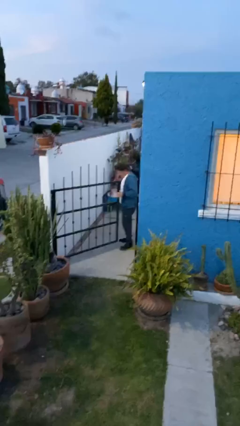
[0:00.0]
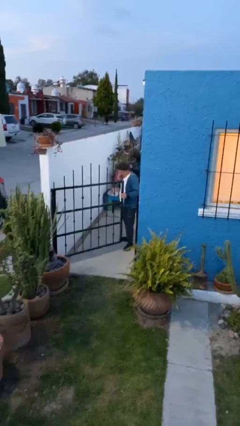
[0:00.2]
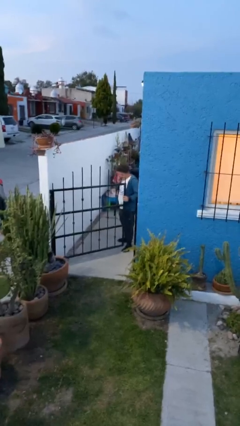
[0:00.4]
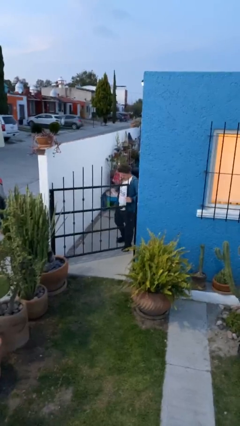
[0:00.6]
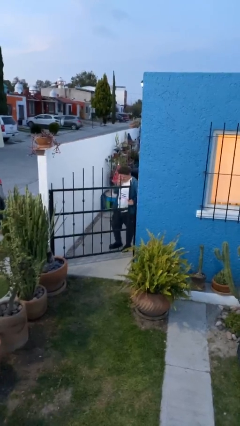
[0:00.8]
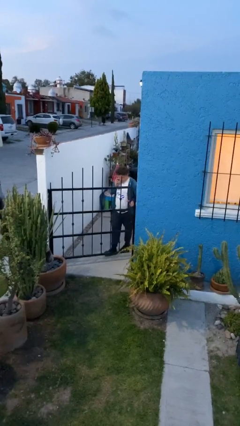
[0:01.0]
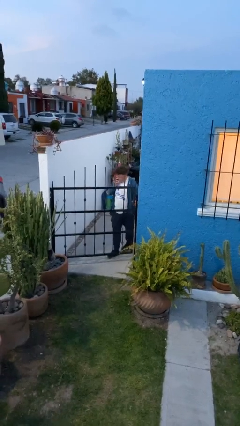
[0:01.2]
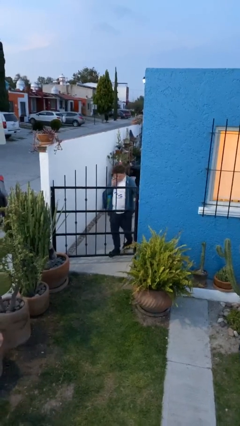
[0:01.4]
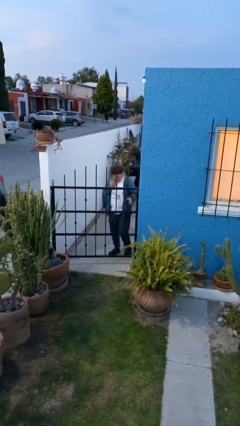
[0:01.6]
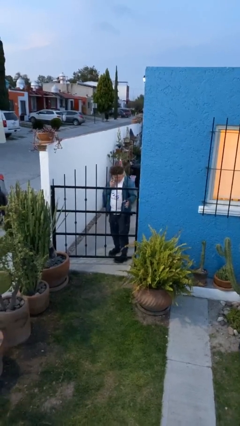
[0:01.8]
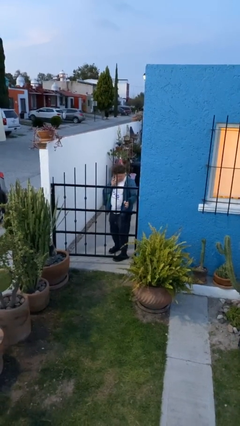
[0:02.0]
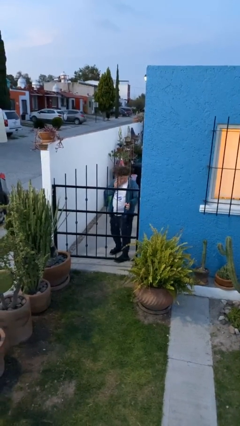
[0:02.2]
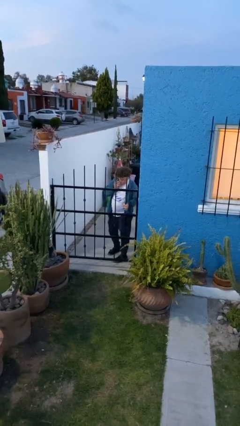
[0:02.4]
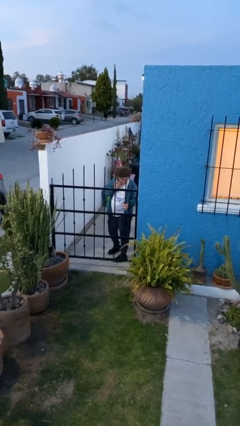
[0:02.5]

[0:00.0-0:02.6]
person closes facility door

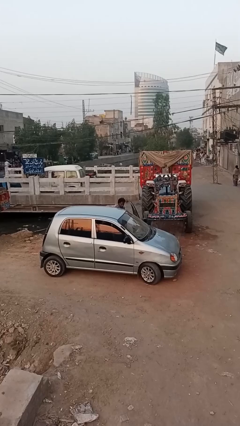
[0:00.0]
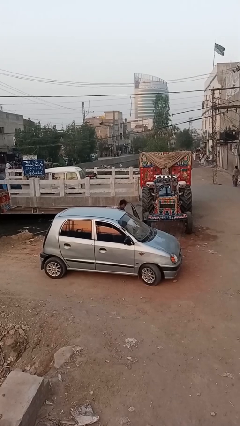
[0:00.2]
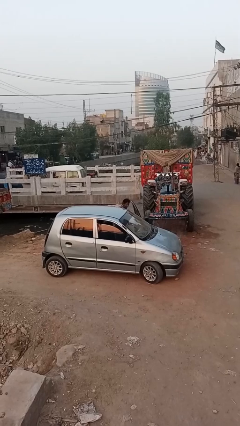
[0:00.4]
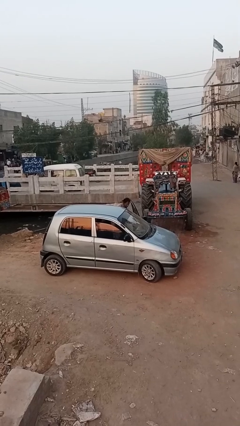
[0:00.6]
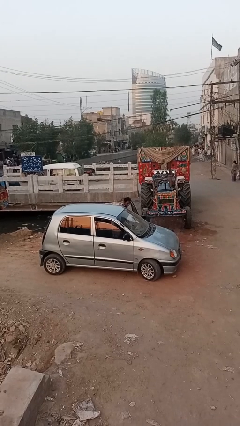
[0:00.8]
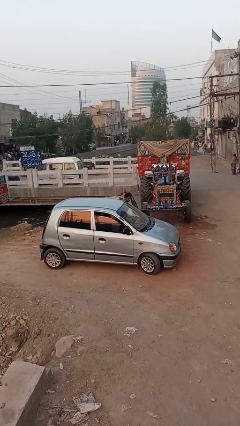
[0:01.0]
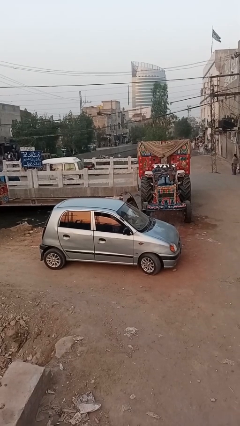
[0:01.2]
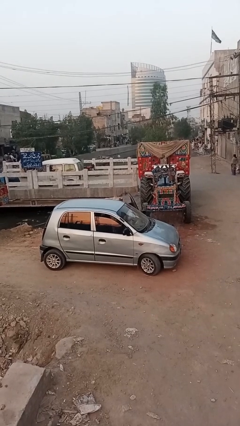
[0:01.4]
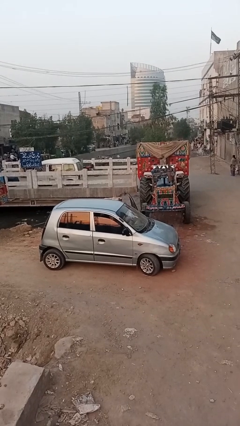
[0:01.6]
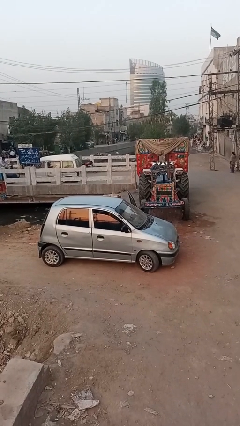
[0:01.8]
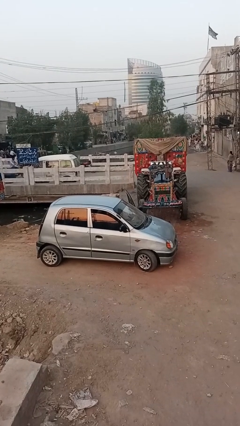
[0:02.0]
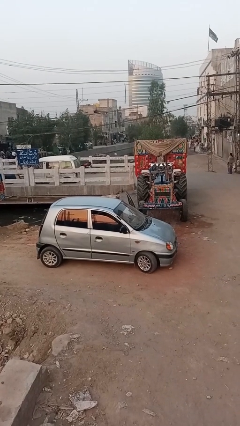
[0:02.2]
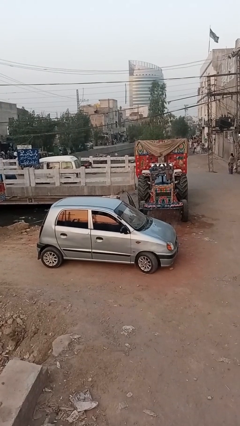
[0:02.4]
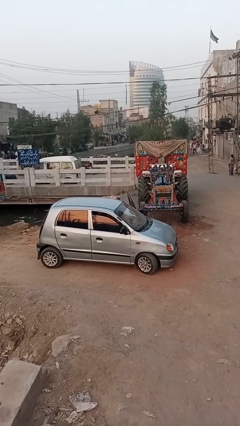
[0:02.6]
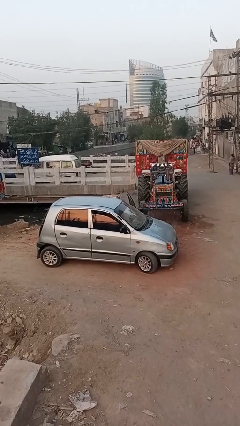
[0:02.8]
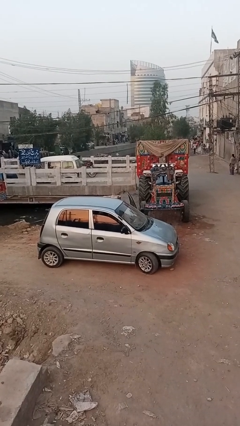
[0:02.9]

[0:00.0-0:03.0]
person enters car

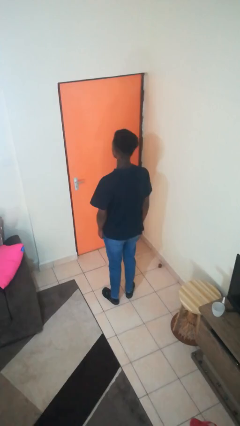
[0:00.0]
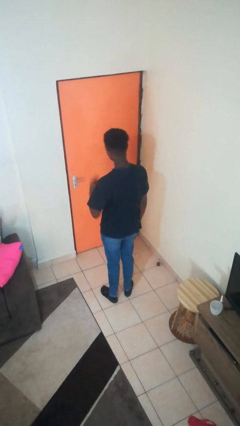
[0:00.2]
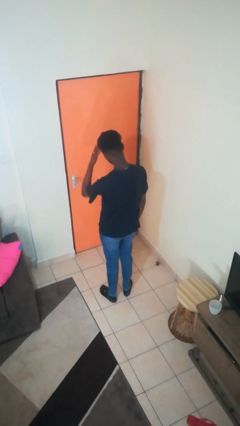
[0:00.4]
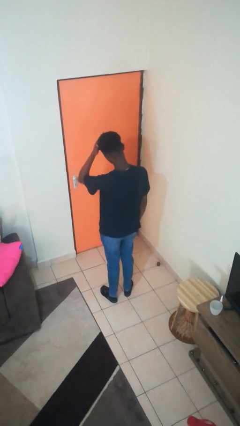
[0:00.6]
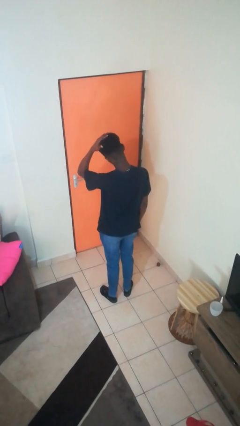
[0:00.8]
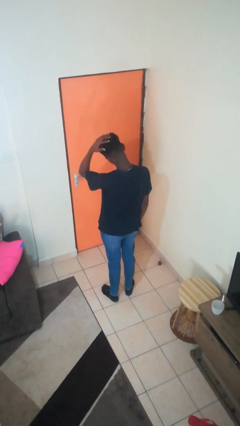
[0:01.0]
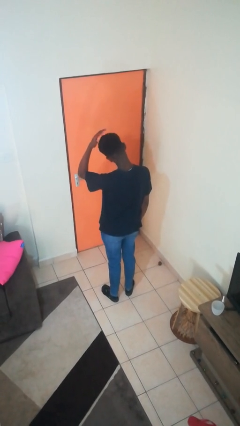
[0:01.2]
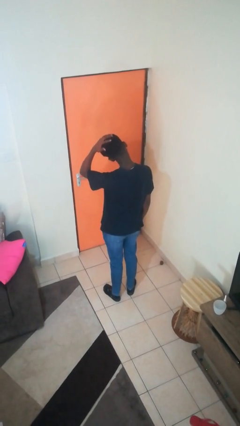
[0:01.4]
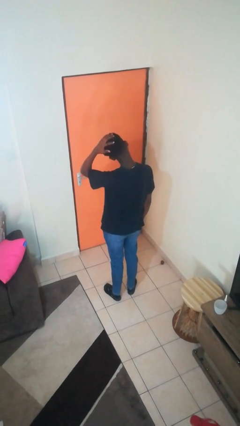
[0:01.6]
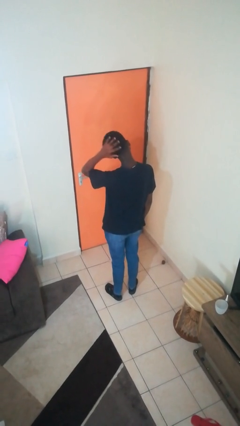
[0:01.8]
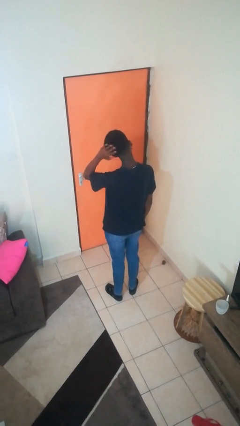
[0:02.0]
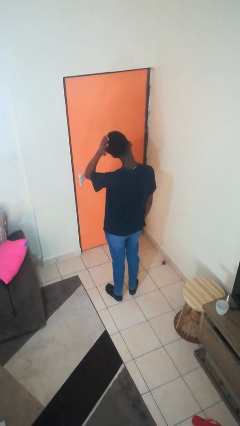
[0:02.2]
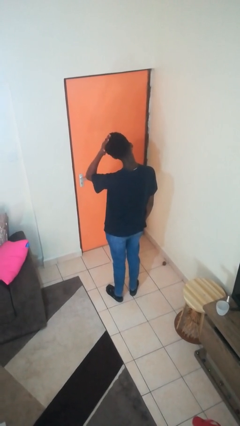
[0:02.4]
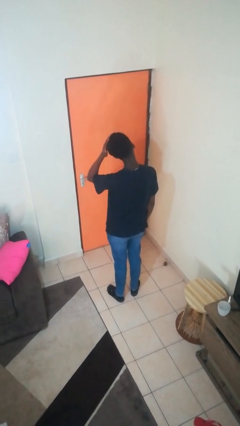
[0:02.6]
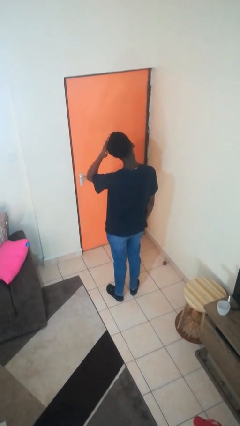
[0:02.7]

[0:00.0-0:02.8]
person strokes hair

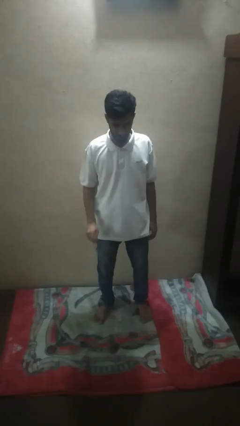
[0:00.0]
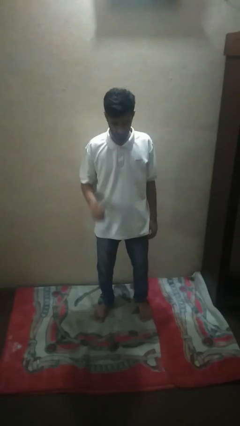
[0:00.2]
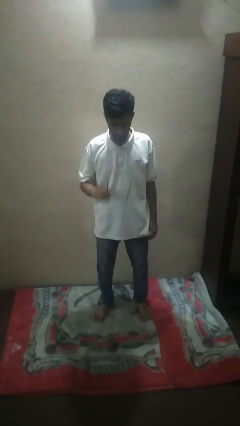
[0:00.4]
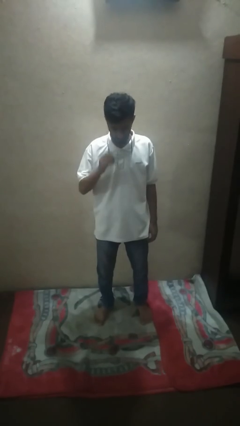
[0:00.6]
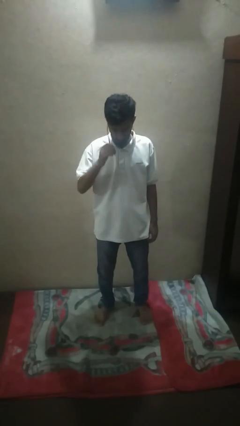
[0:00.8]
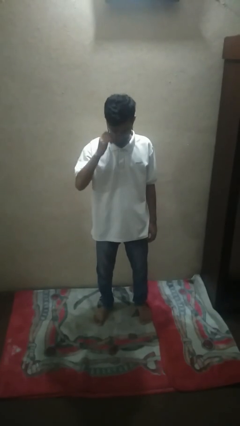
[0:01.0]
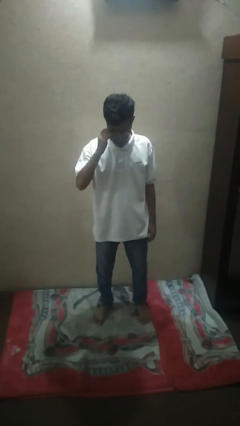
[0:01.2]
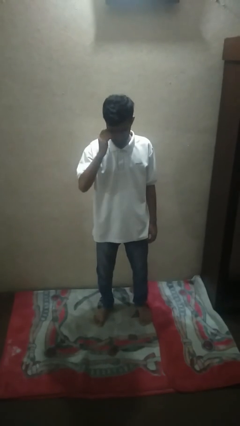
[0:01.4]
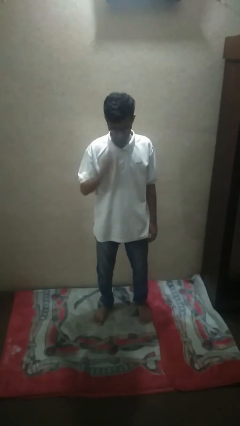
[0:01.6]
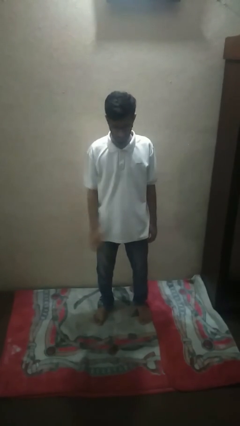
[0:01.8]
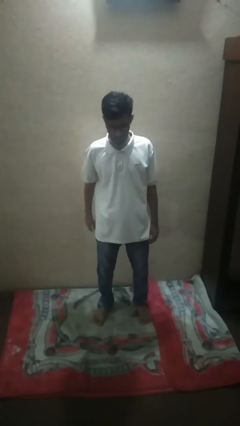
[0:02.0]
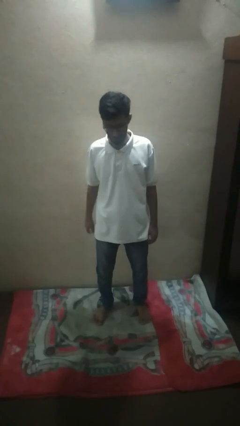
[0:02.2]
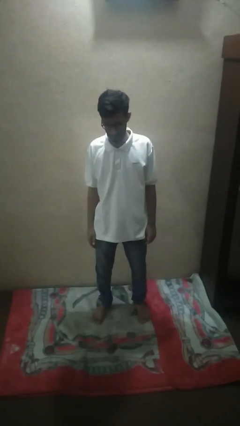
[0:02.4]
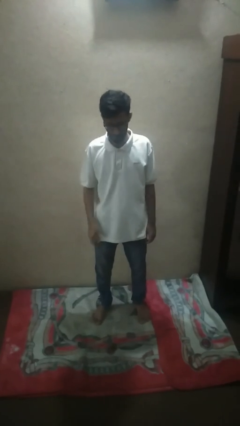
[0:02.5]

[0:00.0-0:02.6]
person puts on glasses

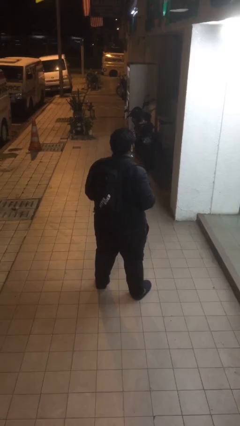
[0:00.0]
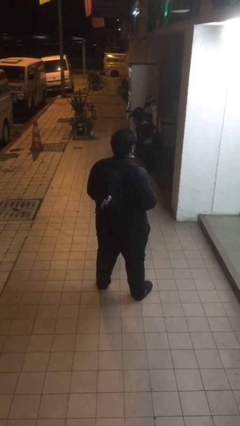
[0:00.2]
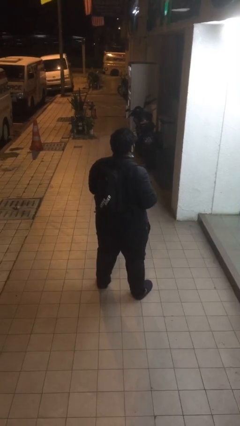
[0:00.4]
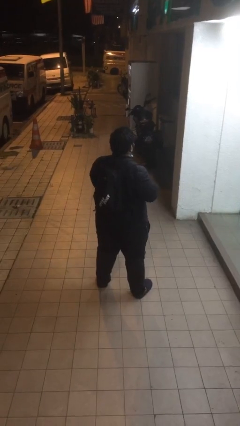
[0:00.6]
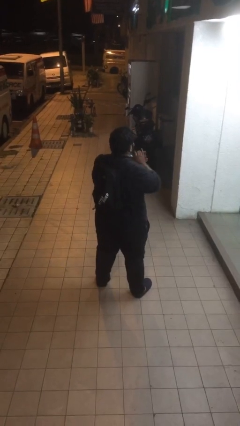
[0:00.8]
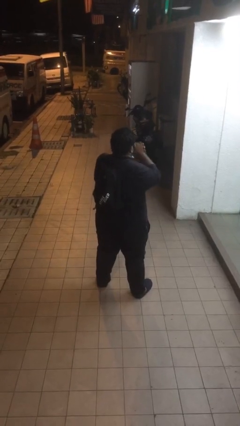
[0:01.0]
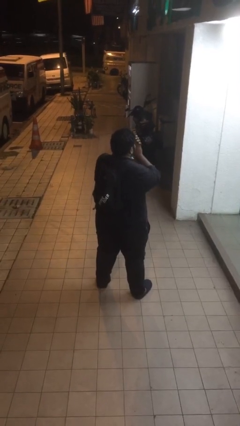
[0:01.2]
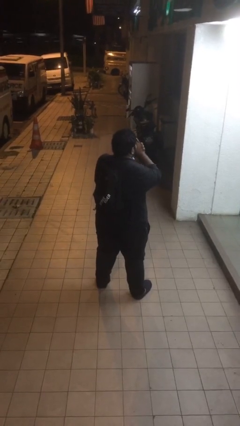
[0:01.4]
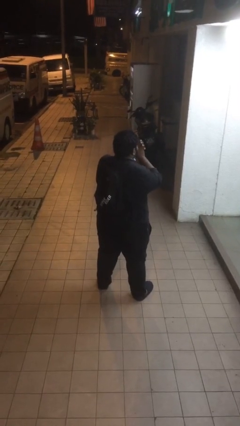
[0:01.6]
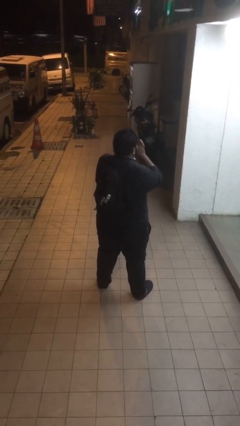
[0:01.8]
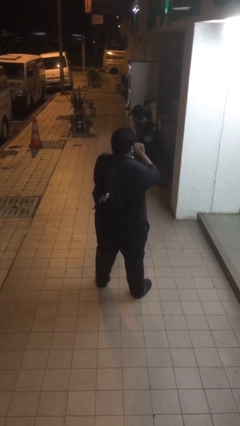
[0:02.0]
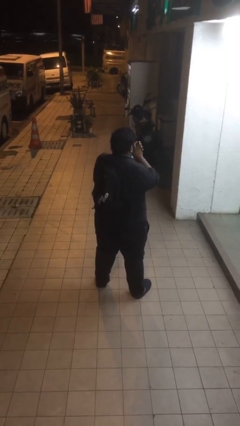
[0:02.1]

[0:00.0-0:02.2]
person blows into hands

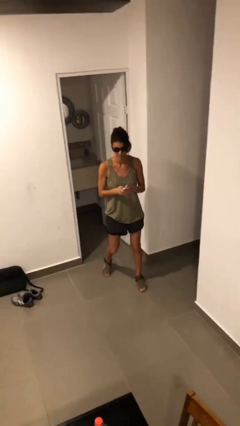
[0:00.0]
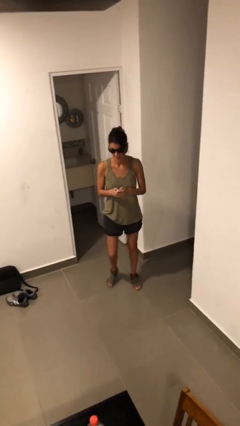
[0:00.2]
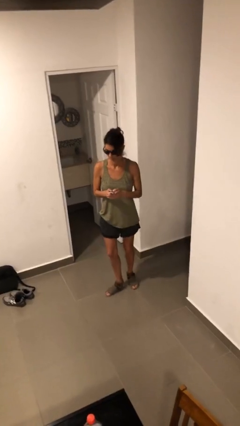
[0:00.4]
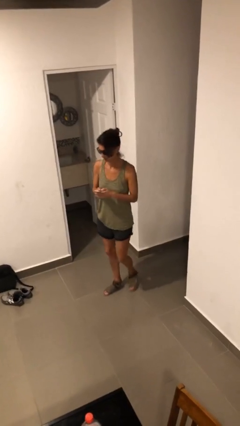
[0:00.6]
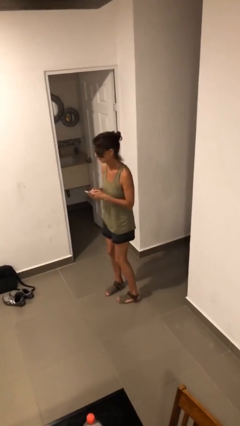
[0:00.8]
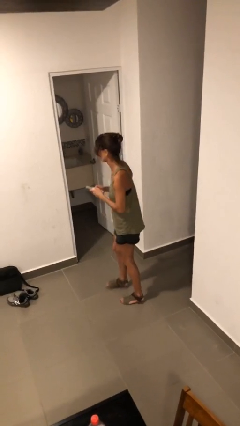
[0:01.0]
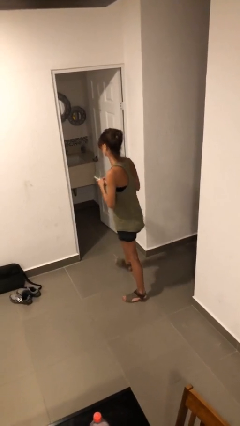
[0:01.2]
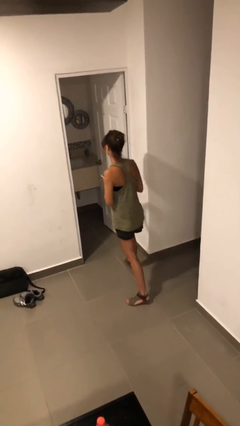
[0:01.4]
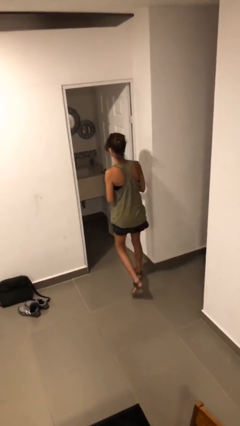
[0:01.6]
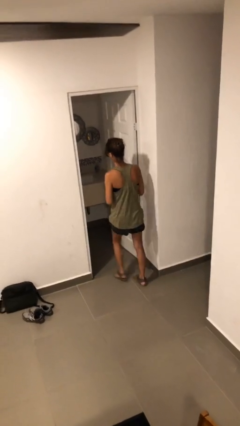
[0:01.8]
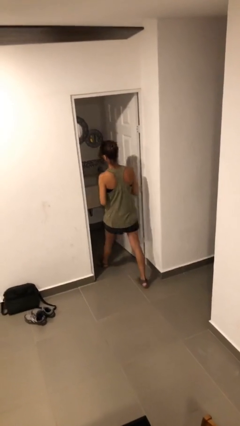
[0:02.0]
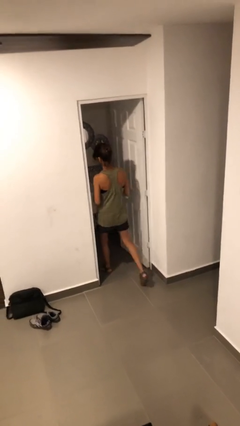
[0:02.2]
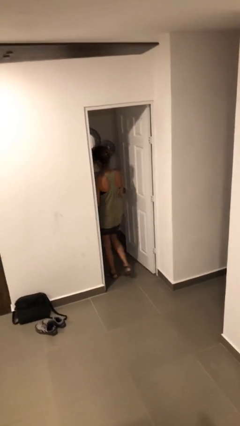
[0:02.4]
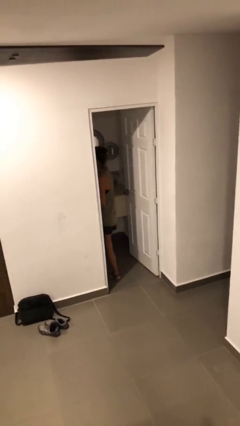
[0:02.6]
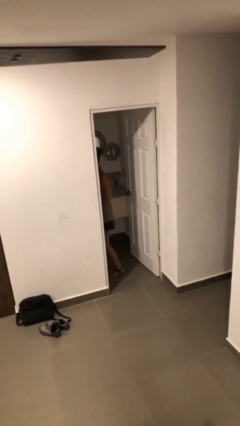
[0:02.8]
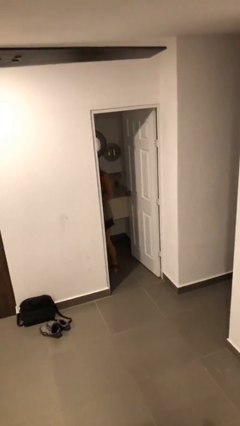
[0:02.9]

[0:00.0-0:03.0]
person exits scene through structure

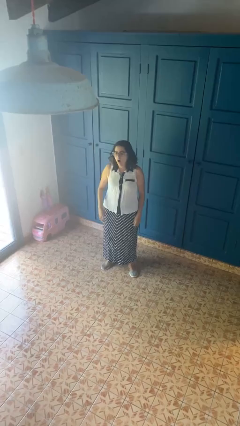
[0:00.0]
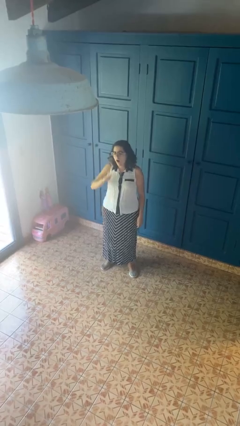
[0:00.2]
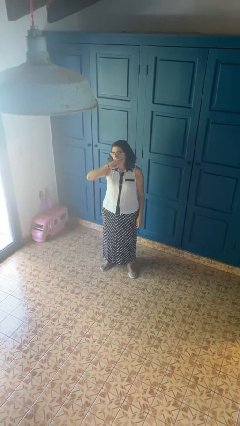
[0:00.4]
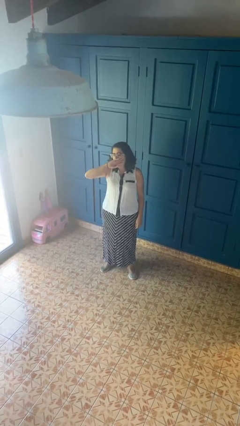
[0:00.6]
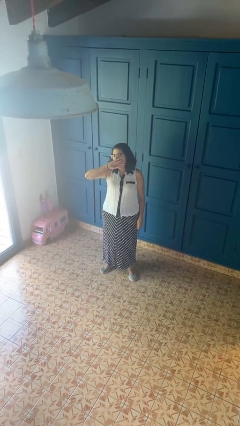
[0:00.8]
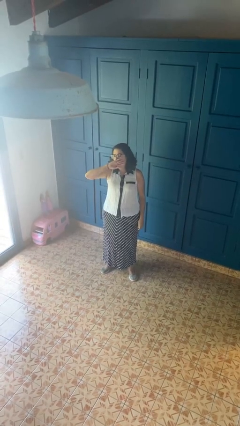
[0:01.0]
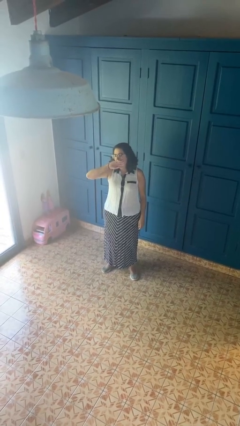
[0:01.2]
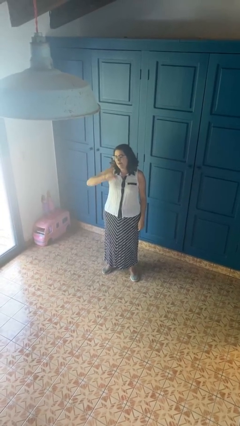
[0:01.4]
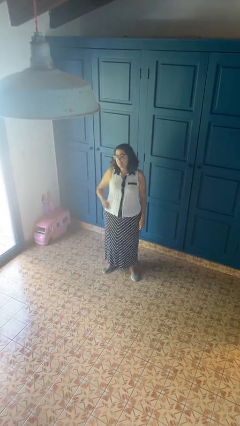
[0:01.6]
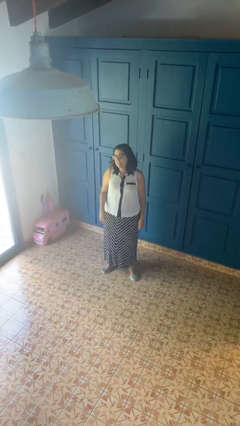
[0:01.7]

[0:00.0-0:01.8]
person yawns
